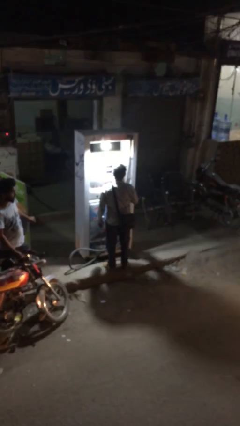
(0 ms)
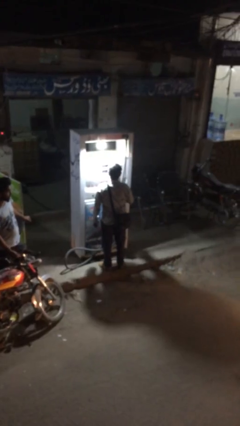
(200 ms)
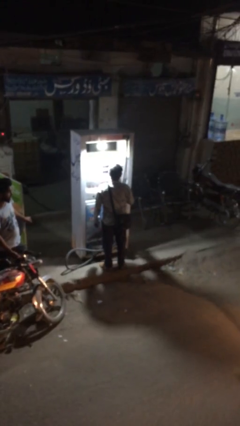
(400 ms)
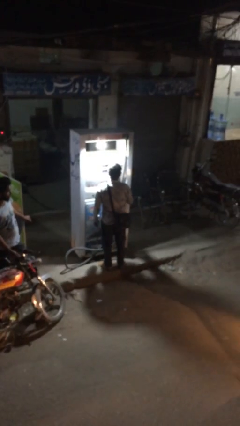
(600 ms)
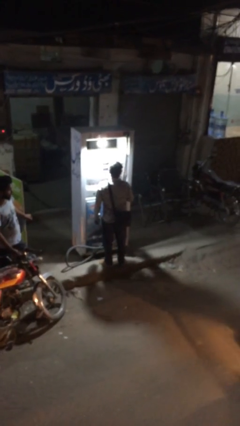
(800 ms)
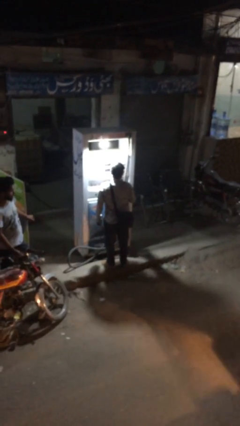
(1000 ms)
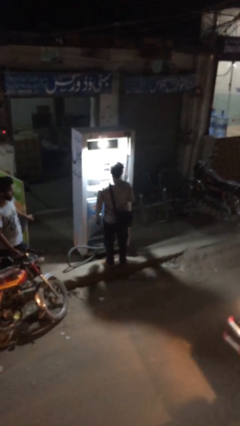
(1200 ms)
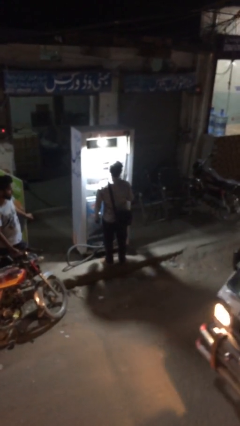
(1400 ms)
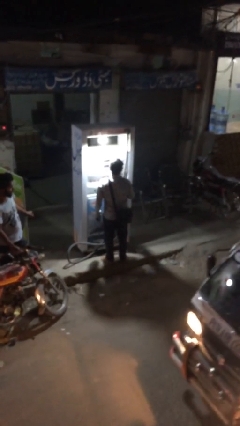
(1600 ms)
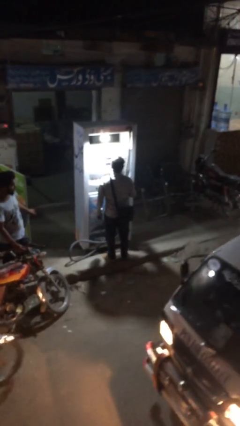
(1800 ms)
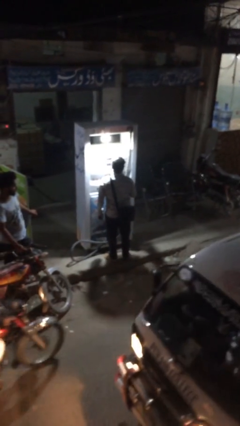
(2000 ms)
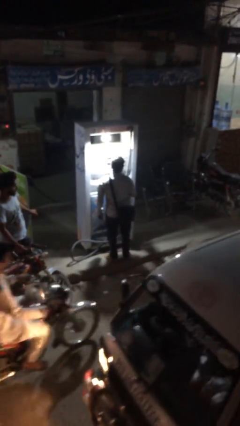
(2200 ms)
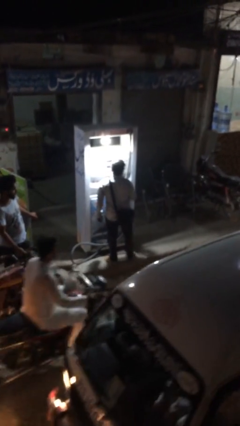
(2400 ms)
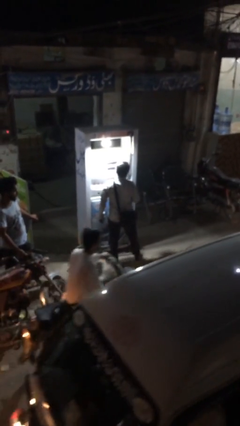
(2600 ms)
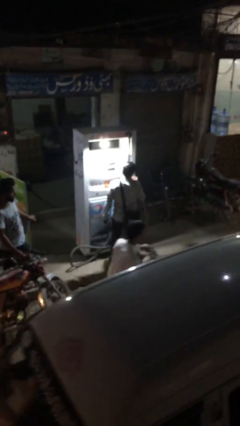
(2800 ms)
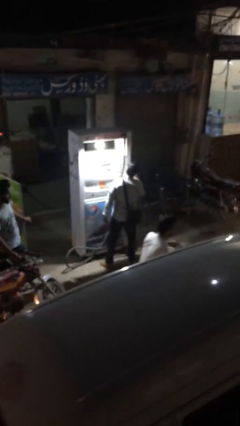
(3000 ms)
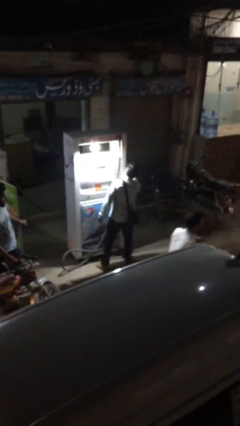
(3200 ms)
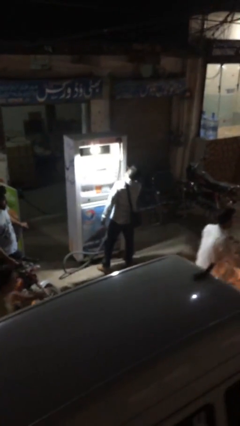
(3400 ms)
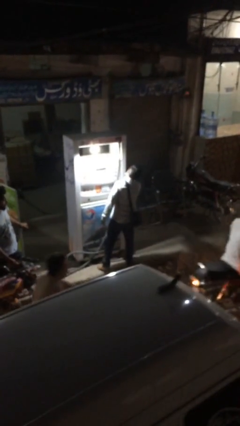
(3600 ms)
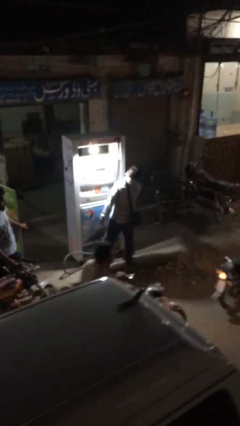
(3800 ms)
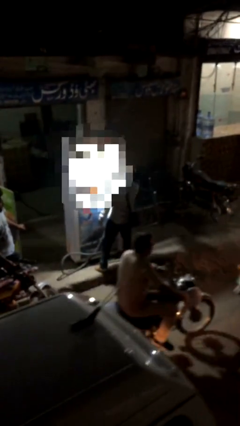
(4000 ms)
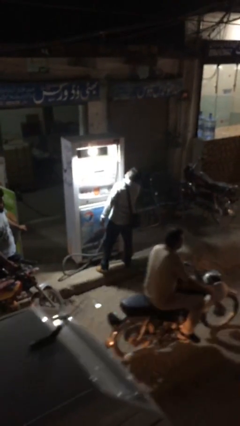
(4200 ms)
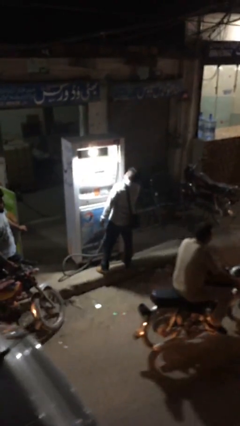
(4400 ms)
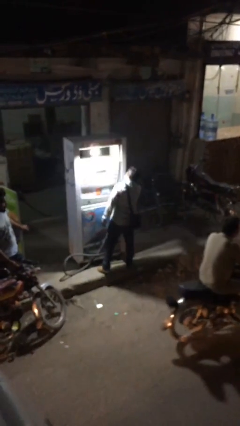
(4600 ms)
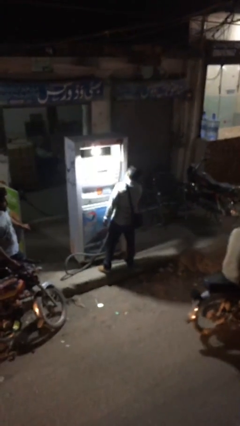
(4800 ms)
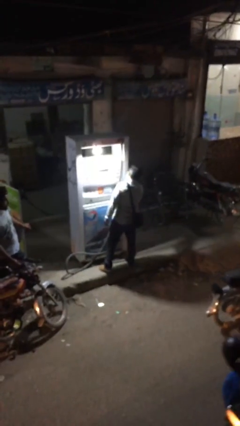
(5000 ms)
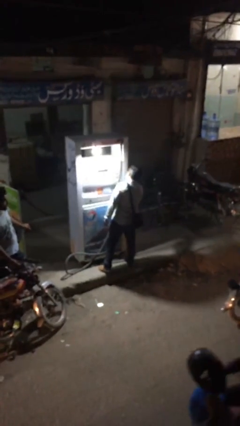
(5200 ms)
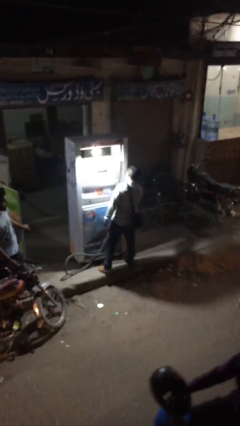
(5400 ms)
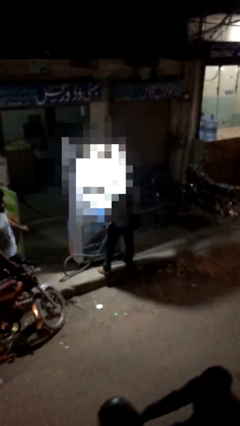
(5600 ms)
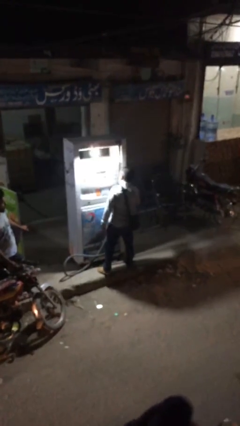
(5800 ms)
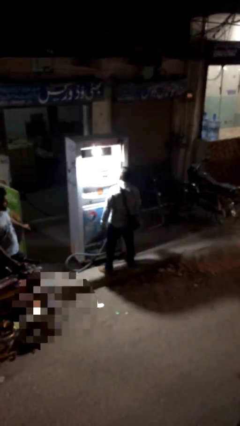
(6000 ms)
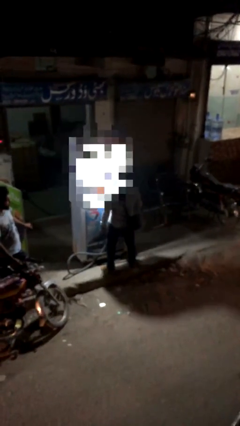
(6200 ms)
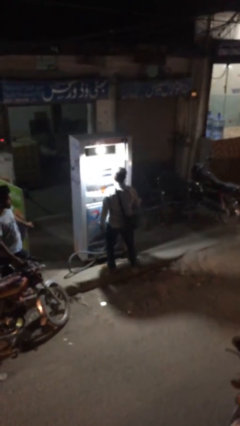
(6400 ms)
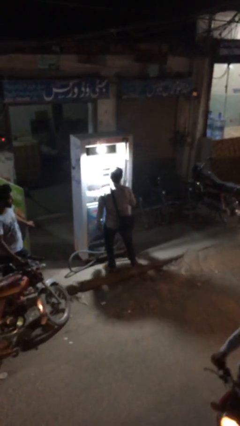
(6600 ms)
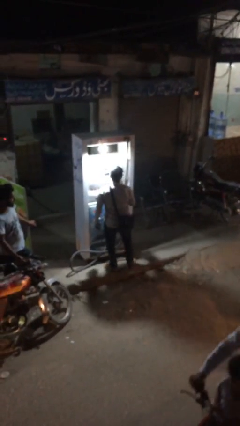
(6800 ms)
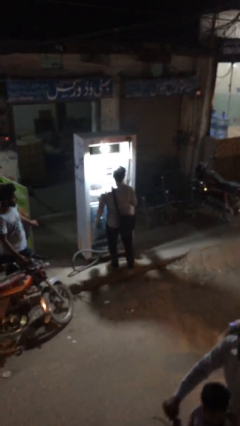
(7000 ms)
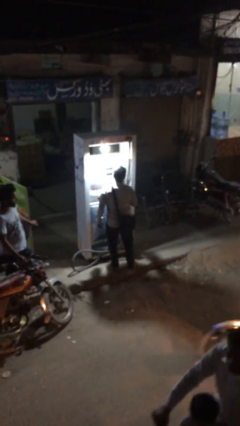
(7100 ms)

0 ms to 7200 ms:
person purchases from machine

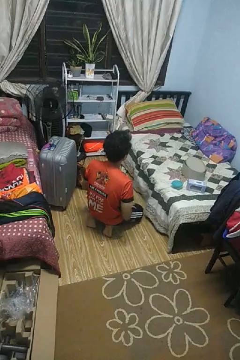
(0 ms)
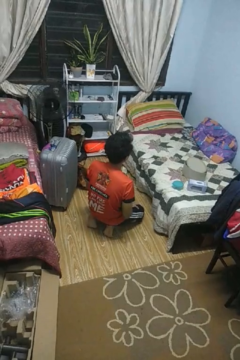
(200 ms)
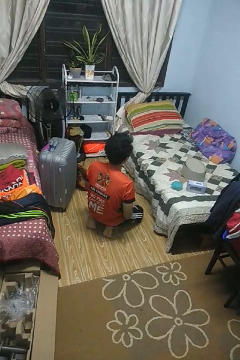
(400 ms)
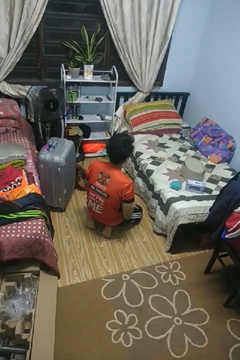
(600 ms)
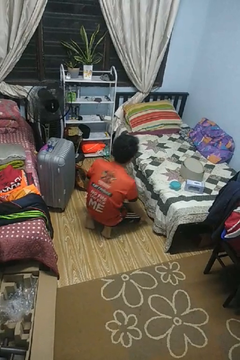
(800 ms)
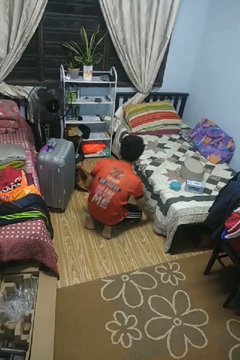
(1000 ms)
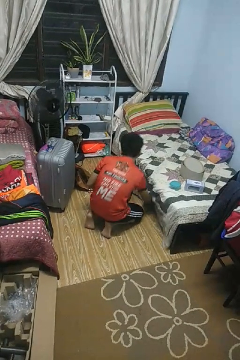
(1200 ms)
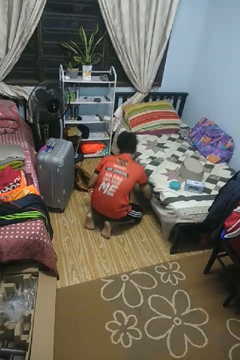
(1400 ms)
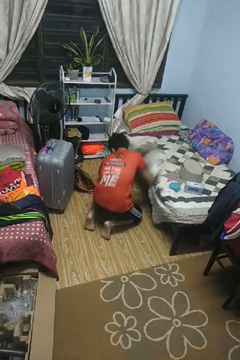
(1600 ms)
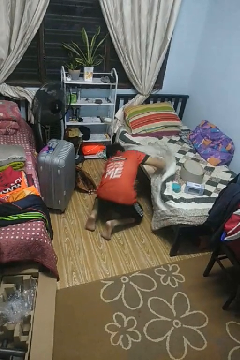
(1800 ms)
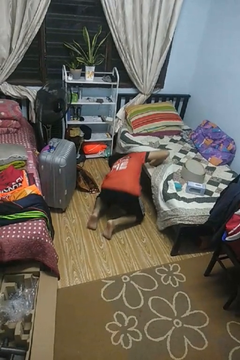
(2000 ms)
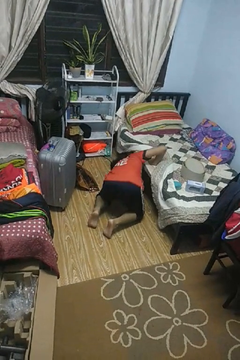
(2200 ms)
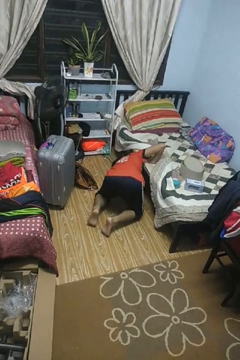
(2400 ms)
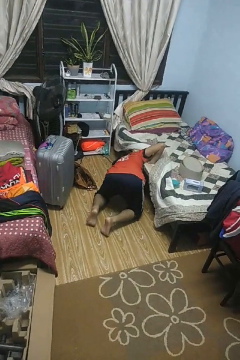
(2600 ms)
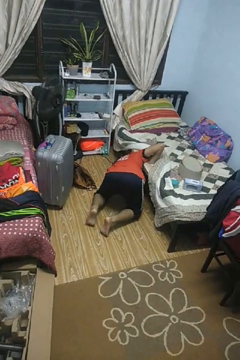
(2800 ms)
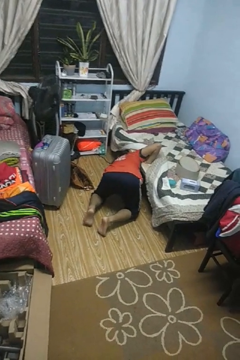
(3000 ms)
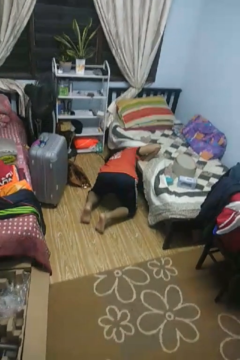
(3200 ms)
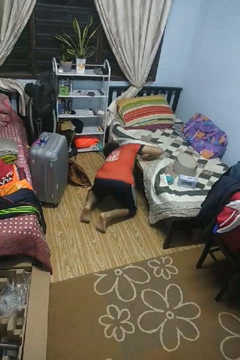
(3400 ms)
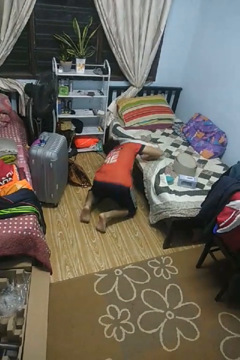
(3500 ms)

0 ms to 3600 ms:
person searches under bed

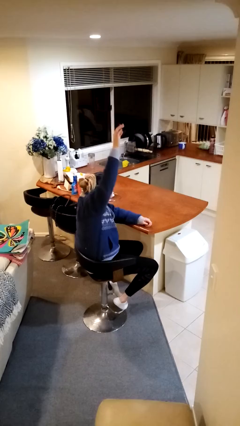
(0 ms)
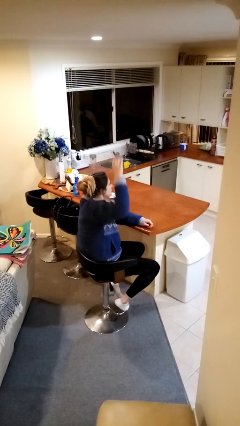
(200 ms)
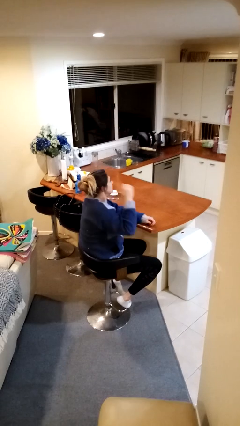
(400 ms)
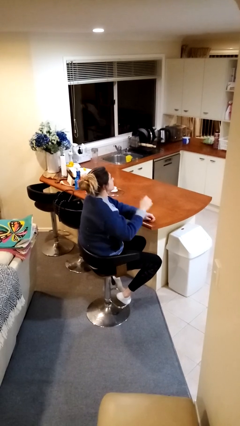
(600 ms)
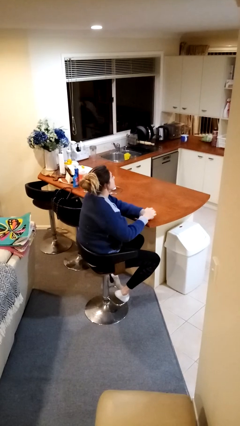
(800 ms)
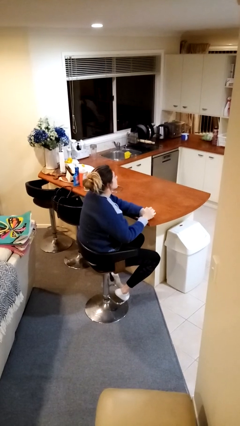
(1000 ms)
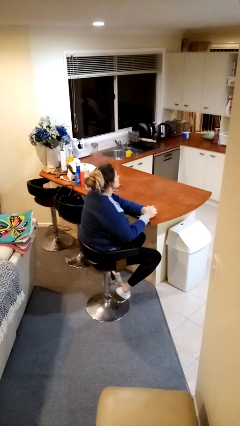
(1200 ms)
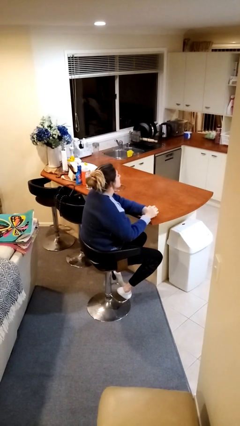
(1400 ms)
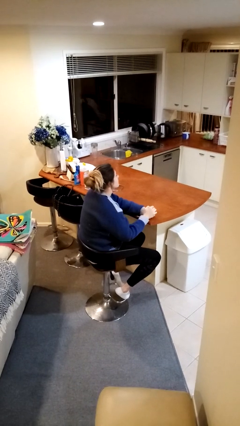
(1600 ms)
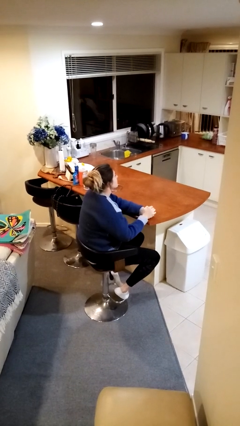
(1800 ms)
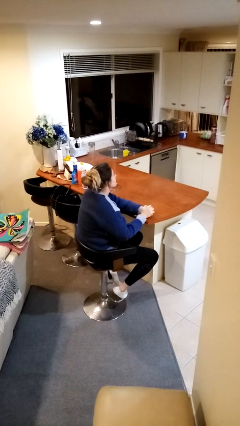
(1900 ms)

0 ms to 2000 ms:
person gestures lower hand

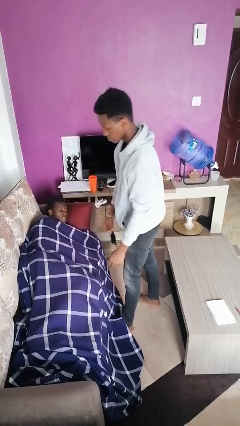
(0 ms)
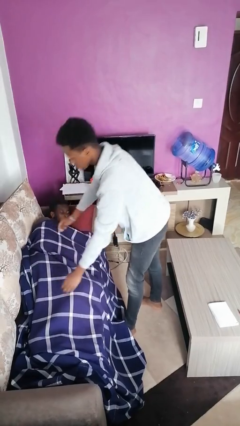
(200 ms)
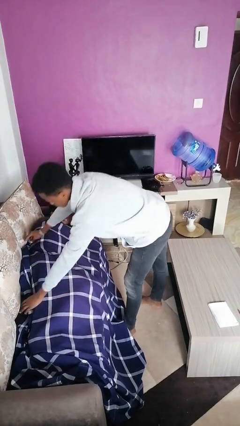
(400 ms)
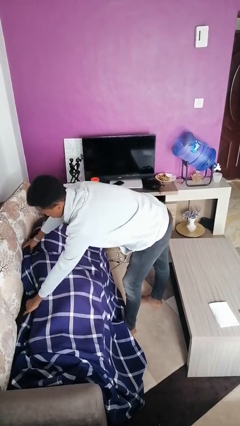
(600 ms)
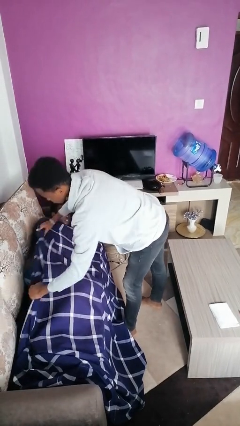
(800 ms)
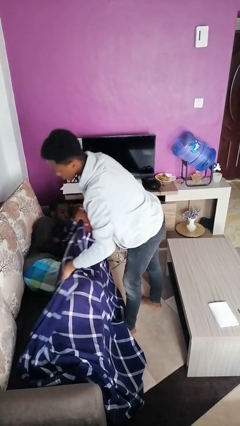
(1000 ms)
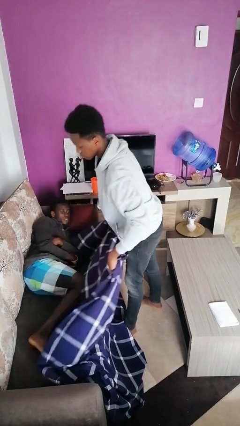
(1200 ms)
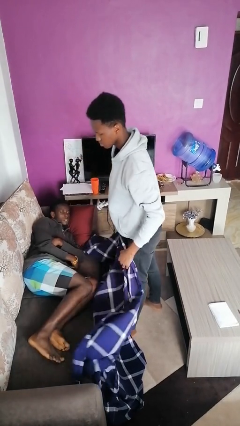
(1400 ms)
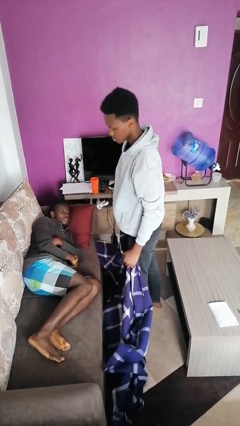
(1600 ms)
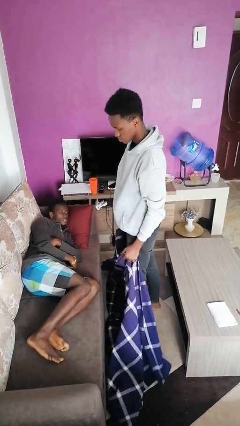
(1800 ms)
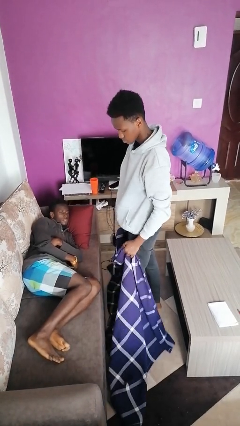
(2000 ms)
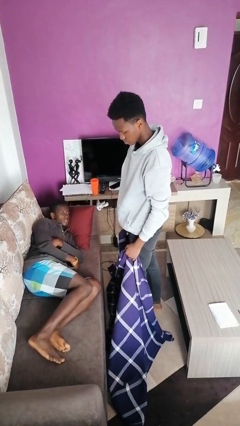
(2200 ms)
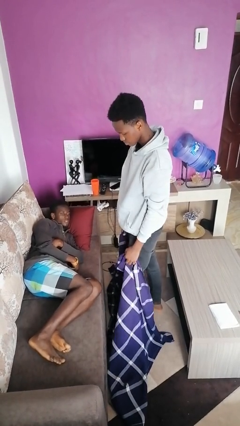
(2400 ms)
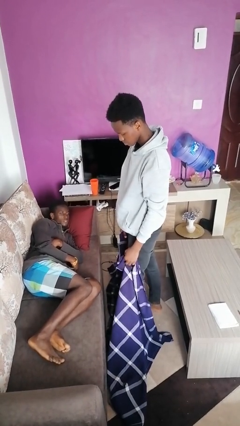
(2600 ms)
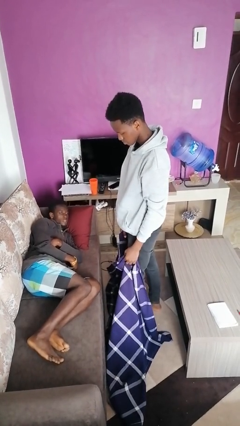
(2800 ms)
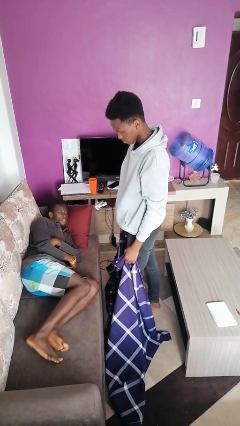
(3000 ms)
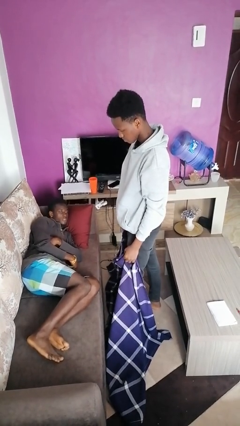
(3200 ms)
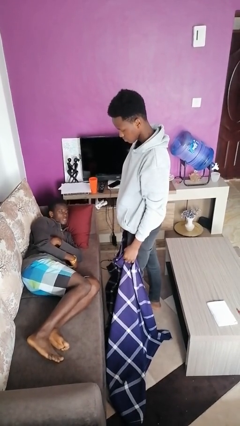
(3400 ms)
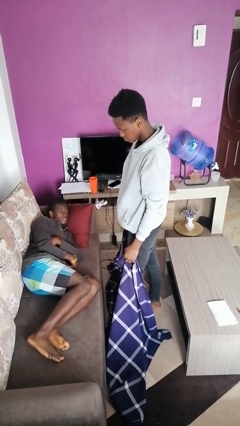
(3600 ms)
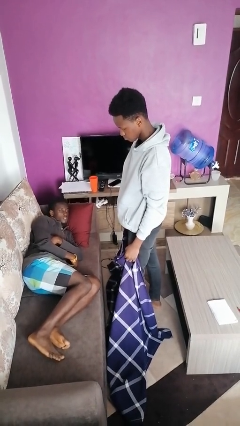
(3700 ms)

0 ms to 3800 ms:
person uncovers friend with blanket

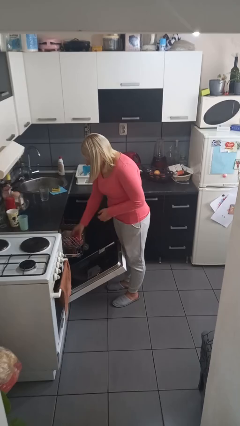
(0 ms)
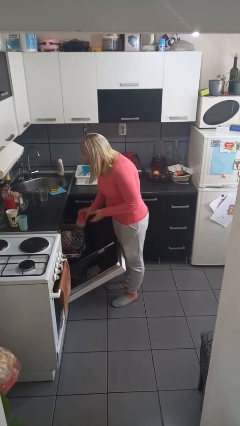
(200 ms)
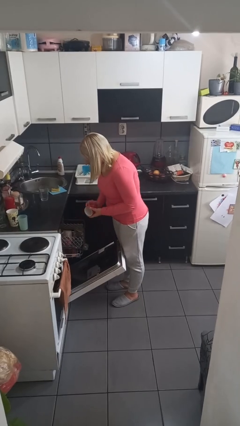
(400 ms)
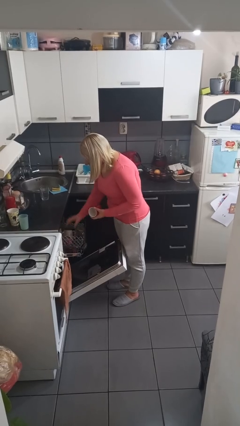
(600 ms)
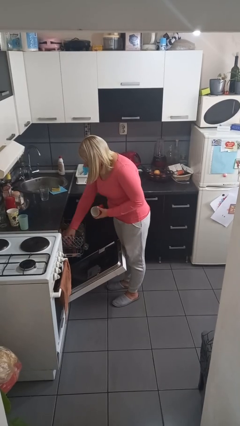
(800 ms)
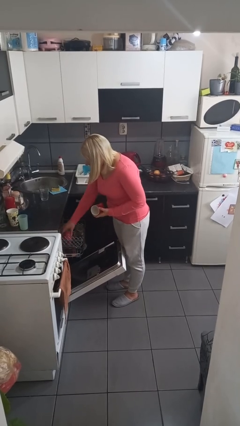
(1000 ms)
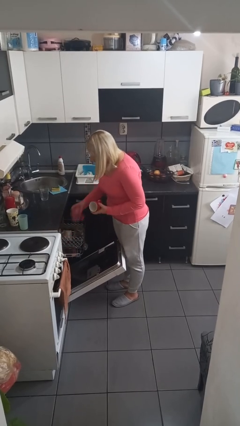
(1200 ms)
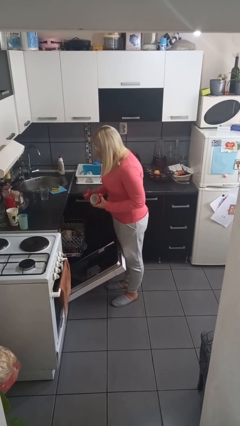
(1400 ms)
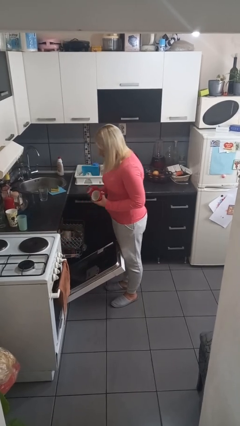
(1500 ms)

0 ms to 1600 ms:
person unloads dishwasher

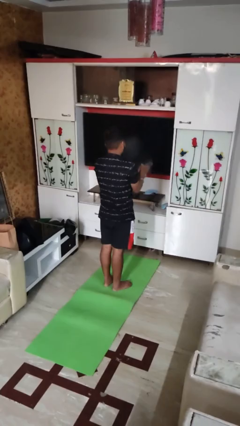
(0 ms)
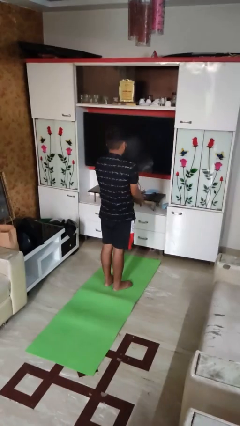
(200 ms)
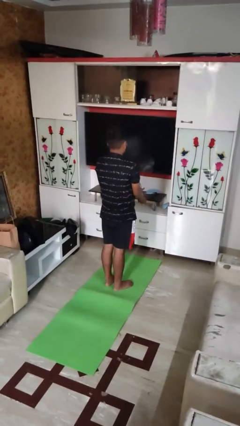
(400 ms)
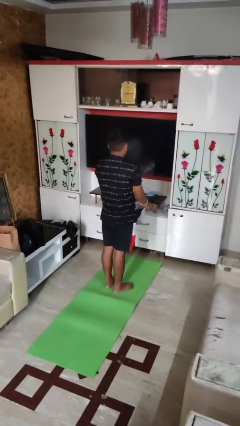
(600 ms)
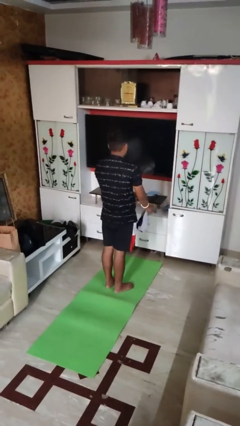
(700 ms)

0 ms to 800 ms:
person catches dropped object
